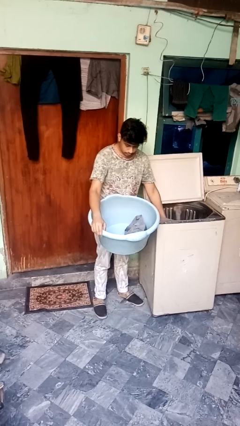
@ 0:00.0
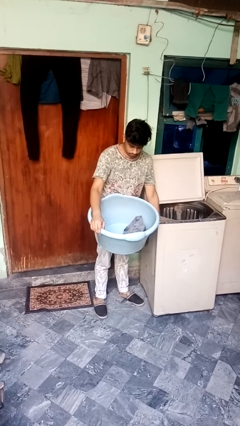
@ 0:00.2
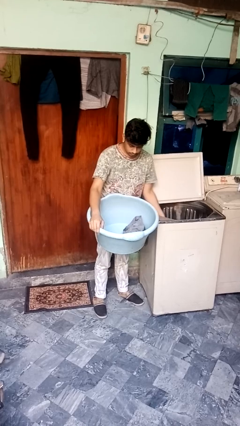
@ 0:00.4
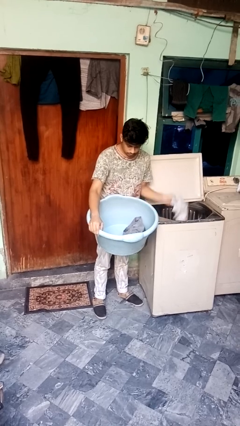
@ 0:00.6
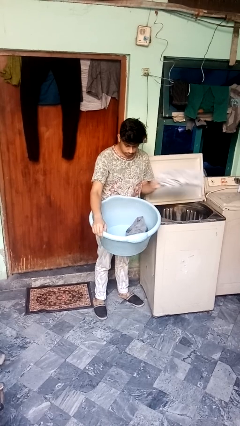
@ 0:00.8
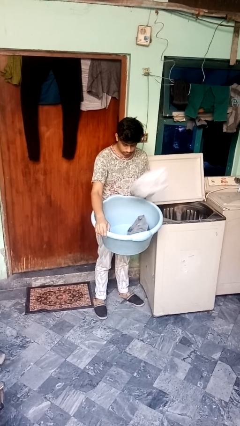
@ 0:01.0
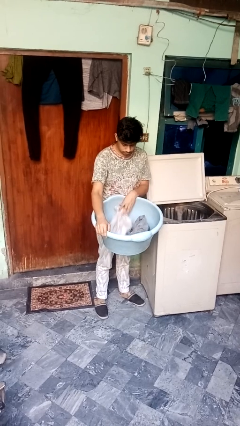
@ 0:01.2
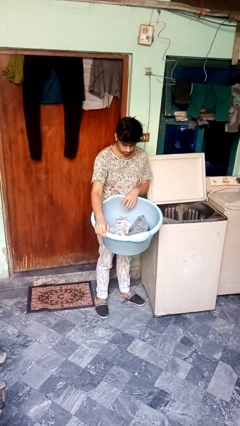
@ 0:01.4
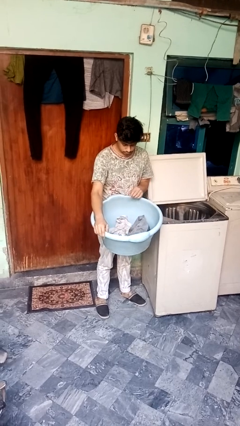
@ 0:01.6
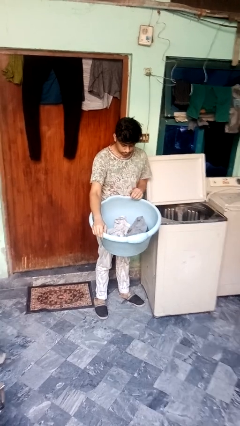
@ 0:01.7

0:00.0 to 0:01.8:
person loads clotheswasher

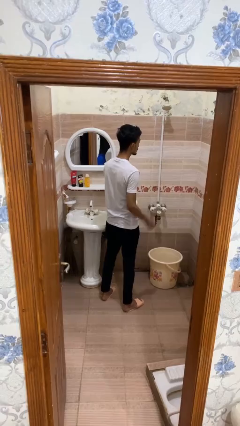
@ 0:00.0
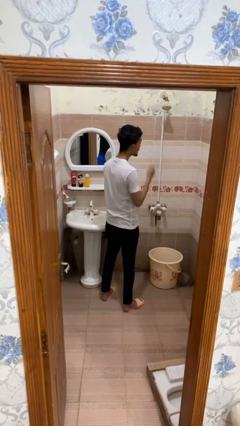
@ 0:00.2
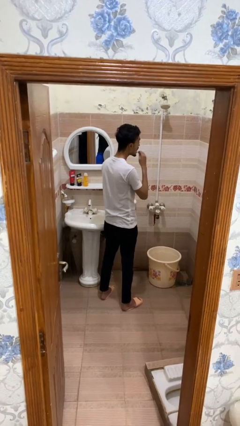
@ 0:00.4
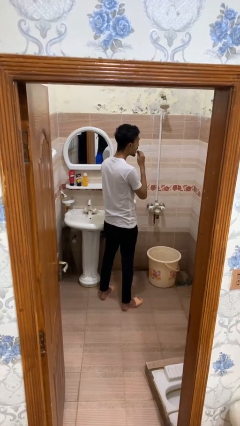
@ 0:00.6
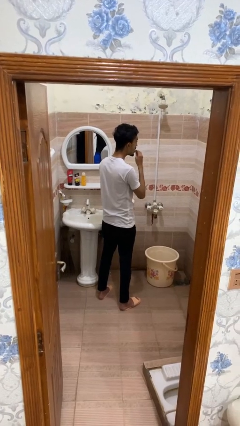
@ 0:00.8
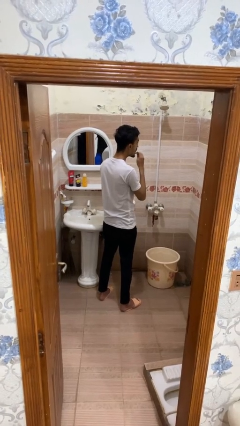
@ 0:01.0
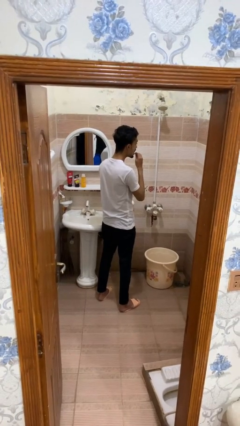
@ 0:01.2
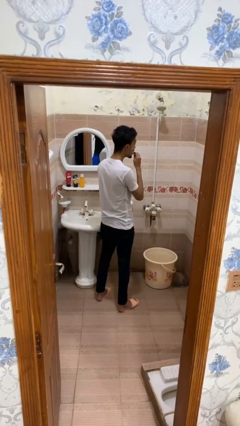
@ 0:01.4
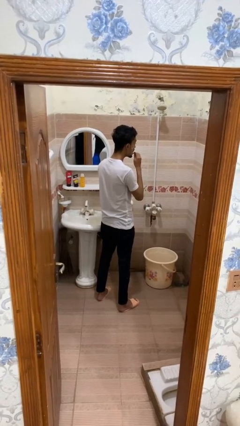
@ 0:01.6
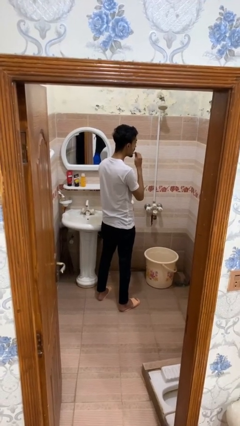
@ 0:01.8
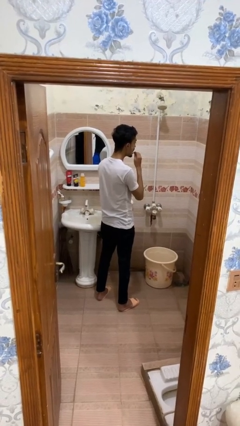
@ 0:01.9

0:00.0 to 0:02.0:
person flosses

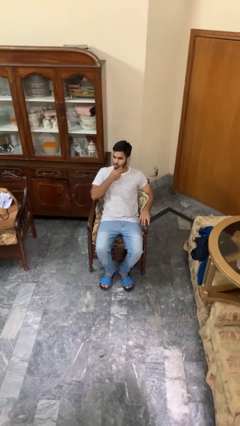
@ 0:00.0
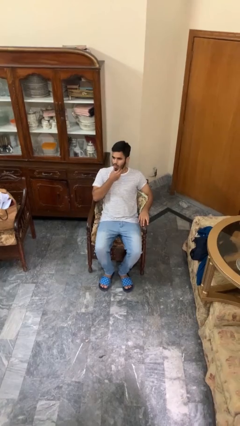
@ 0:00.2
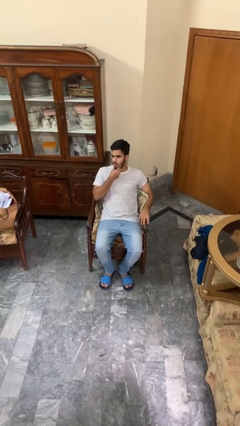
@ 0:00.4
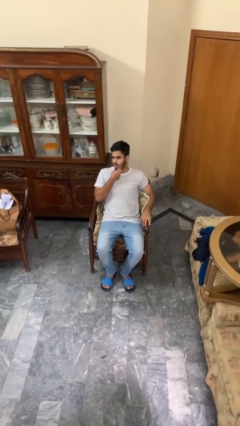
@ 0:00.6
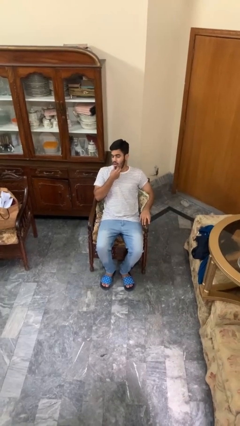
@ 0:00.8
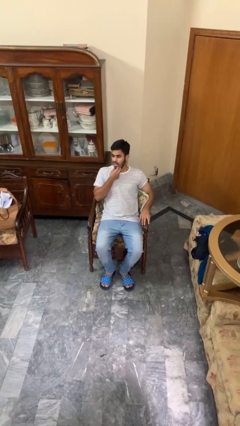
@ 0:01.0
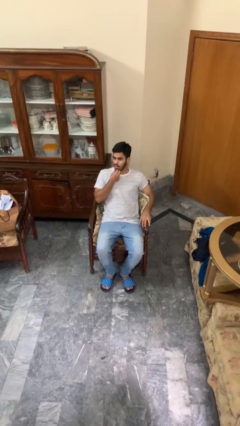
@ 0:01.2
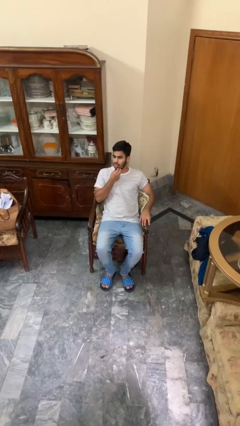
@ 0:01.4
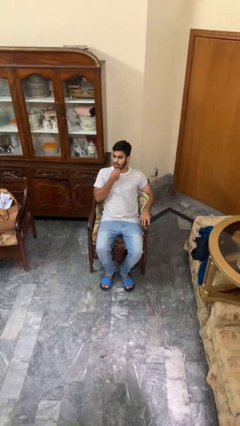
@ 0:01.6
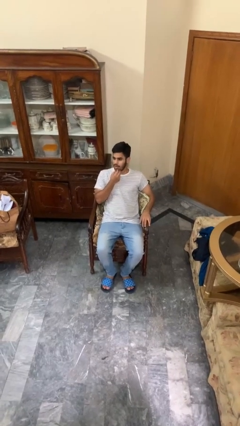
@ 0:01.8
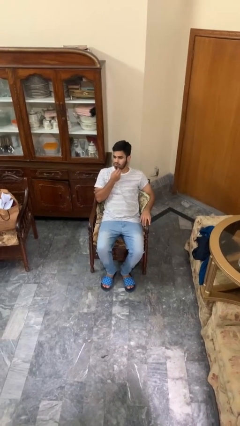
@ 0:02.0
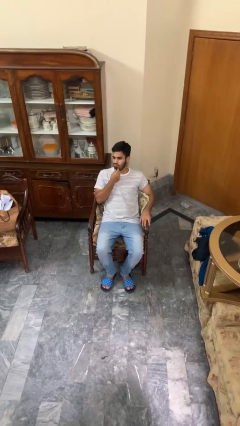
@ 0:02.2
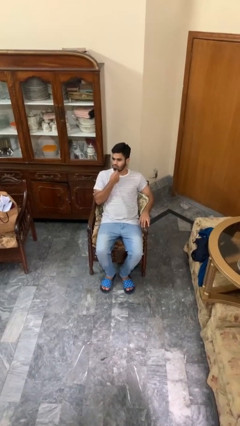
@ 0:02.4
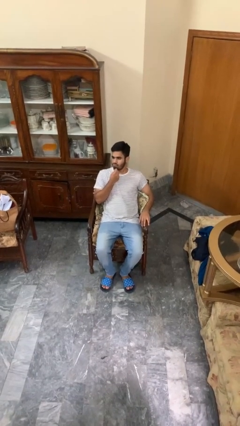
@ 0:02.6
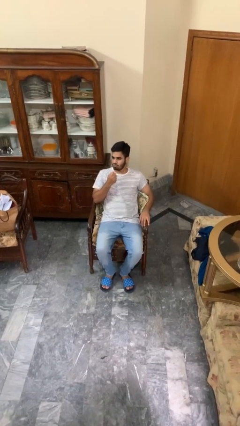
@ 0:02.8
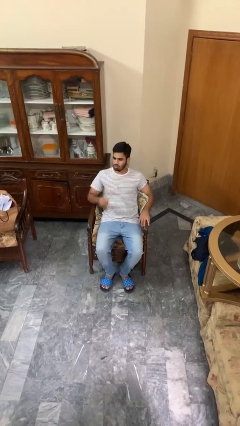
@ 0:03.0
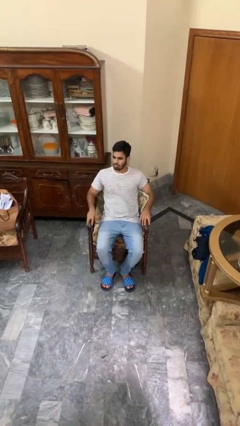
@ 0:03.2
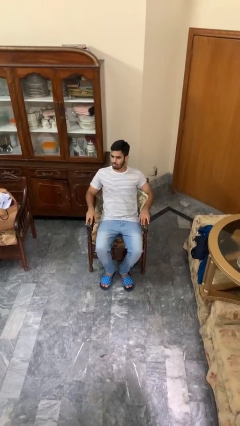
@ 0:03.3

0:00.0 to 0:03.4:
person strokes chin

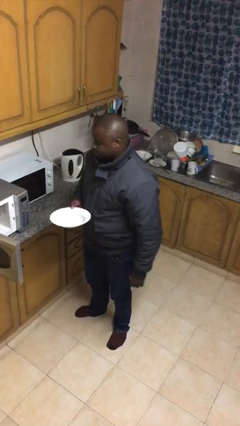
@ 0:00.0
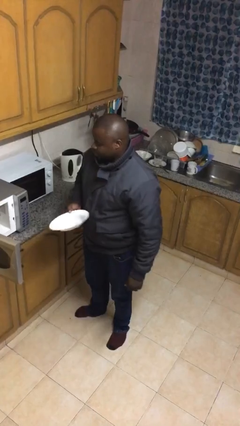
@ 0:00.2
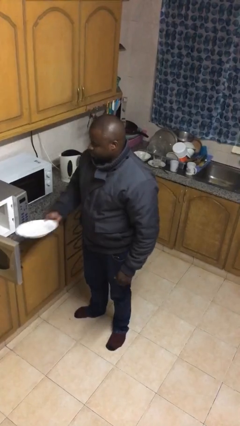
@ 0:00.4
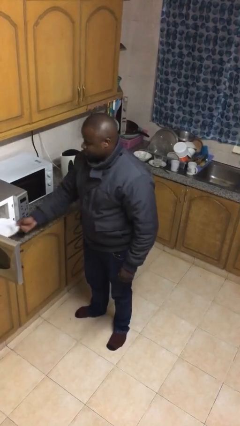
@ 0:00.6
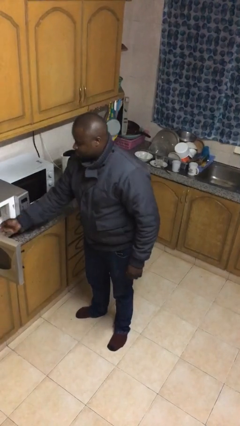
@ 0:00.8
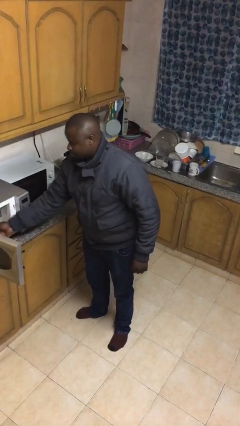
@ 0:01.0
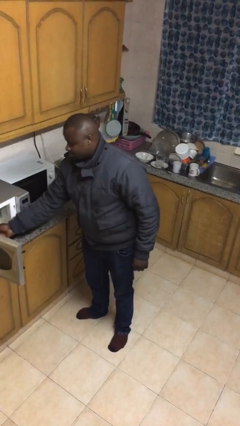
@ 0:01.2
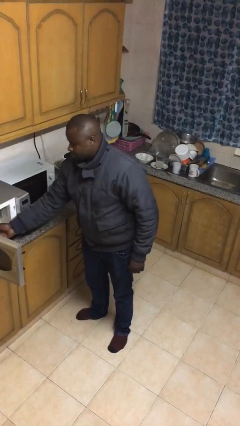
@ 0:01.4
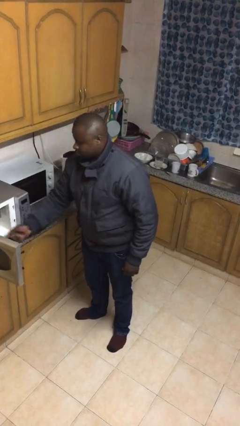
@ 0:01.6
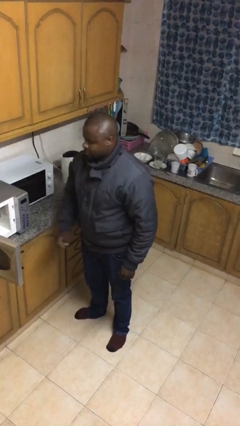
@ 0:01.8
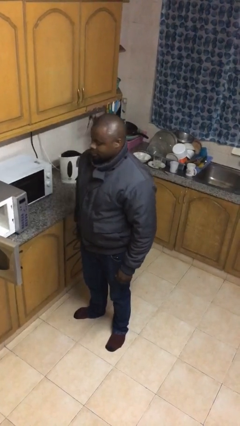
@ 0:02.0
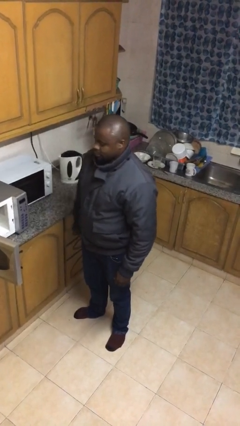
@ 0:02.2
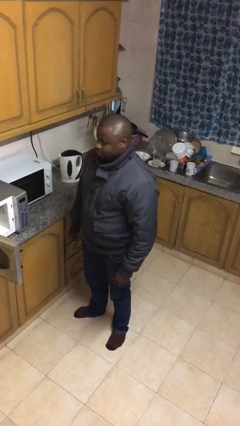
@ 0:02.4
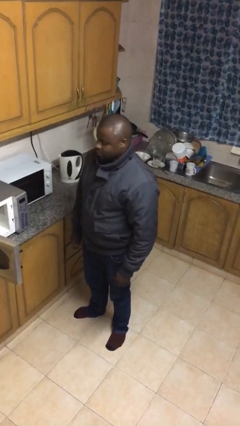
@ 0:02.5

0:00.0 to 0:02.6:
person puts object into microwave

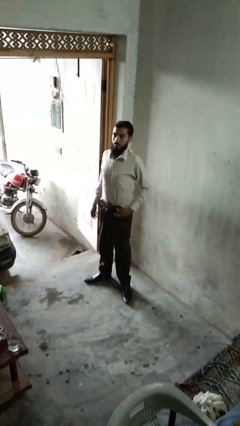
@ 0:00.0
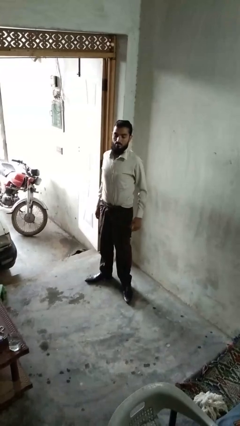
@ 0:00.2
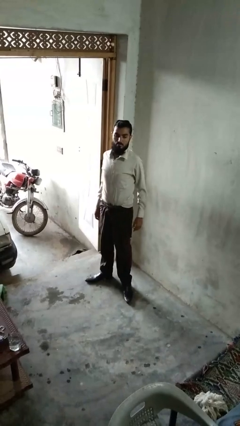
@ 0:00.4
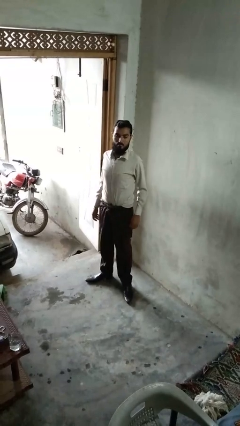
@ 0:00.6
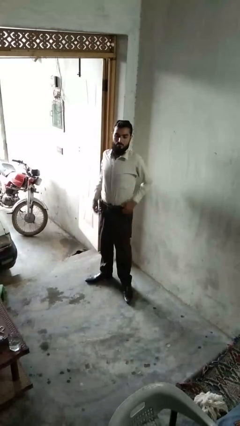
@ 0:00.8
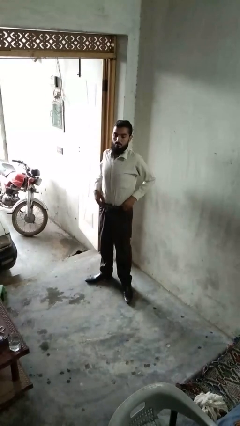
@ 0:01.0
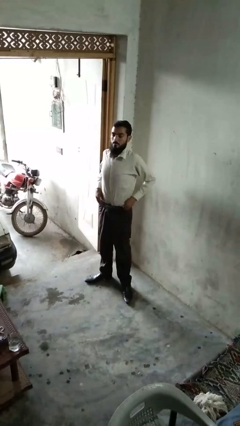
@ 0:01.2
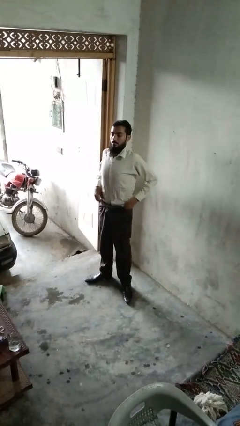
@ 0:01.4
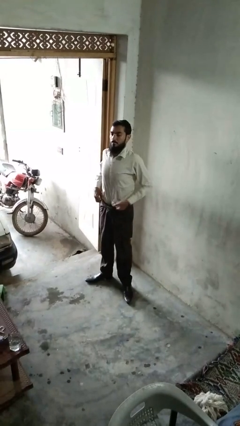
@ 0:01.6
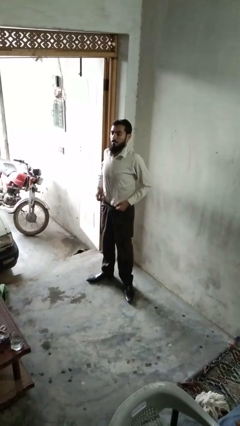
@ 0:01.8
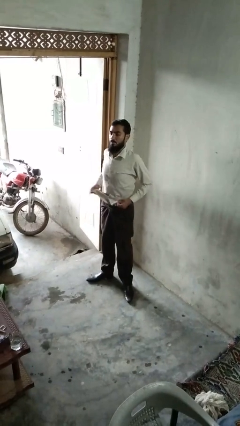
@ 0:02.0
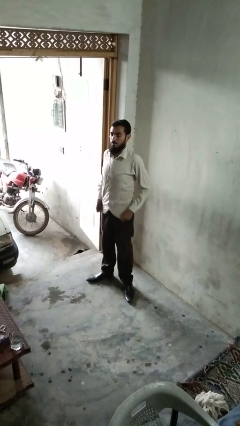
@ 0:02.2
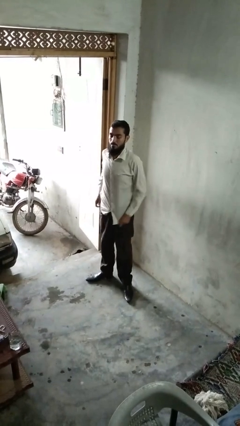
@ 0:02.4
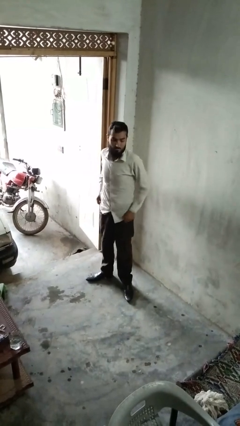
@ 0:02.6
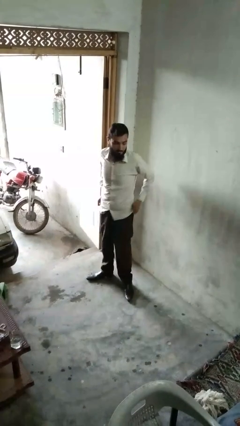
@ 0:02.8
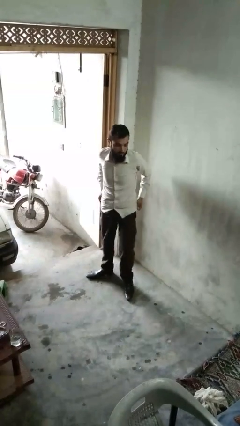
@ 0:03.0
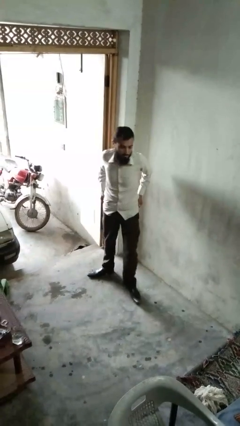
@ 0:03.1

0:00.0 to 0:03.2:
person untucks shirt

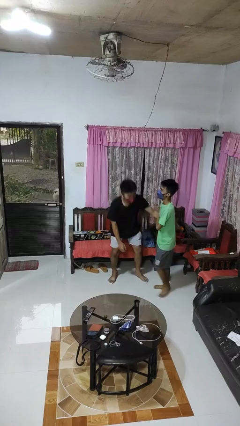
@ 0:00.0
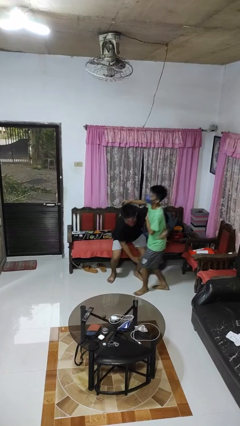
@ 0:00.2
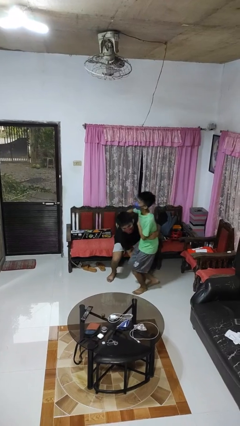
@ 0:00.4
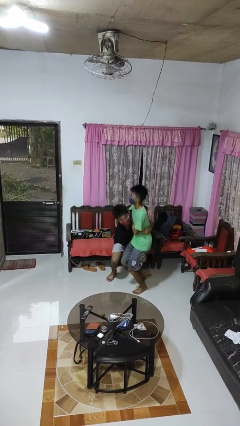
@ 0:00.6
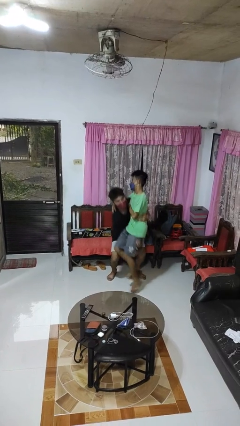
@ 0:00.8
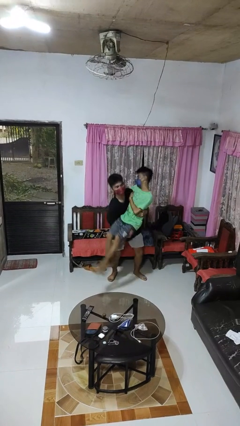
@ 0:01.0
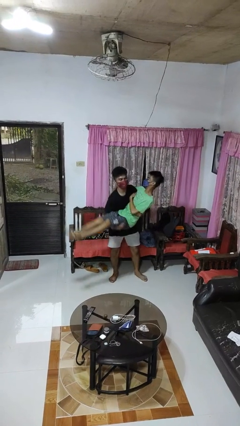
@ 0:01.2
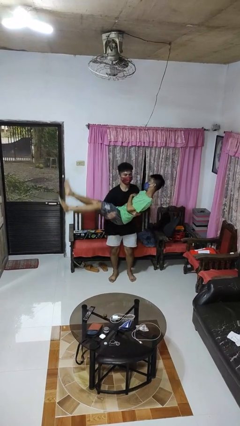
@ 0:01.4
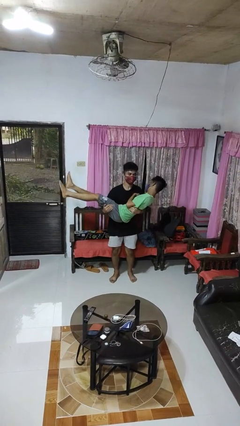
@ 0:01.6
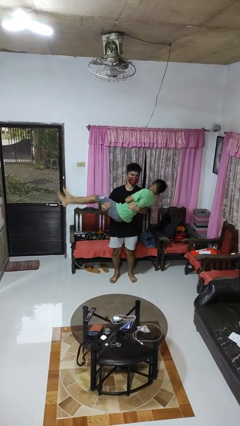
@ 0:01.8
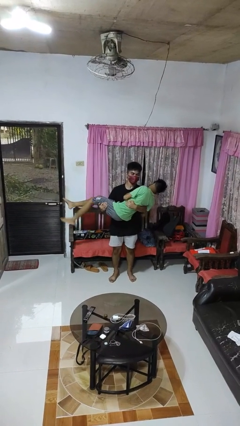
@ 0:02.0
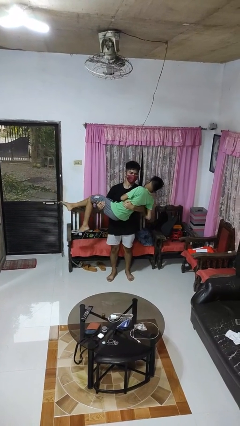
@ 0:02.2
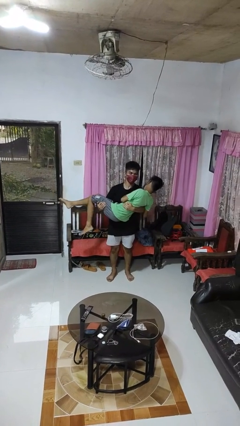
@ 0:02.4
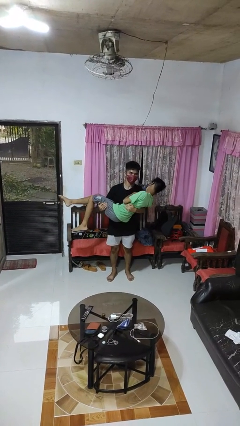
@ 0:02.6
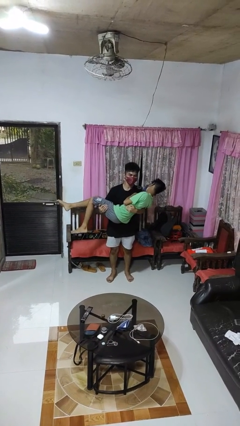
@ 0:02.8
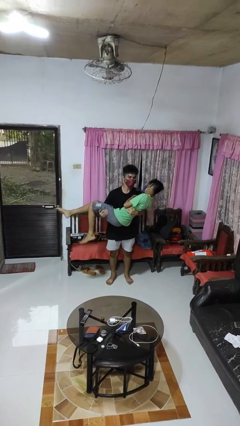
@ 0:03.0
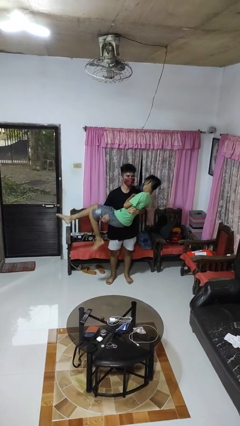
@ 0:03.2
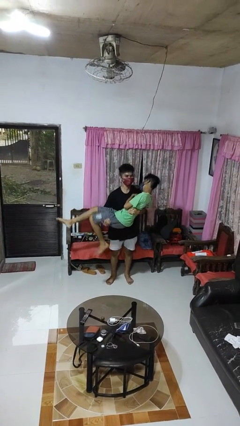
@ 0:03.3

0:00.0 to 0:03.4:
person picks up person

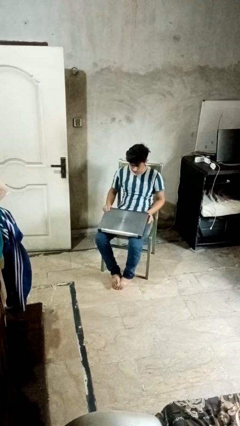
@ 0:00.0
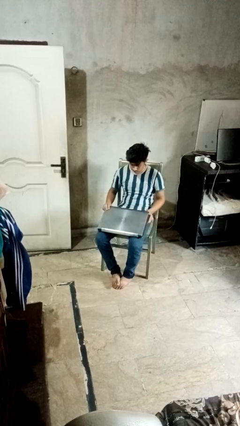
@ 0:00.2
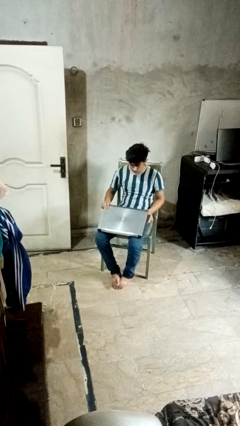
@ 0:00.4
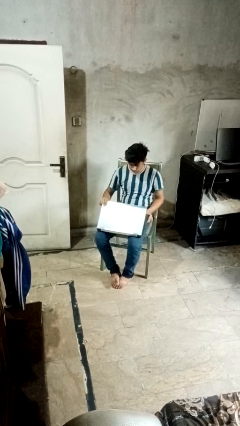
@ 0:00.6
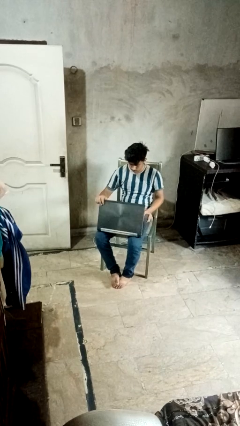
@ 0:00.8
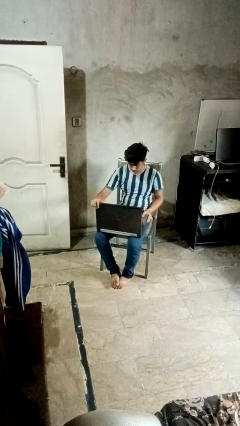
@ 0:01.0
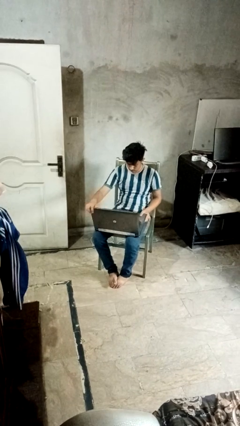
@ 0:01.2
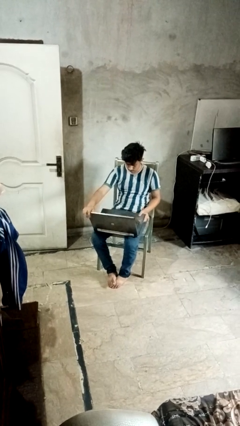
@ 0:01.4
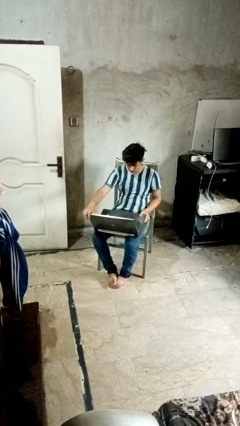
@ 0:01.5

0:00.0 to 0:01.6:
person opens laptop
